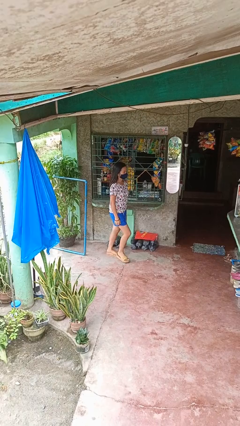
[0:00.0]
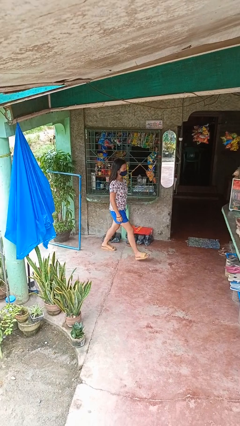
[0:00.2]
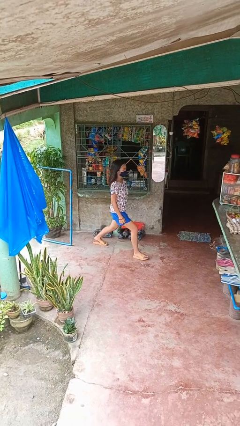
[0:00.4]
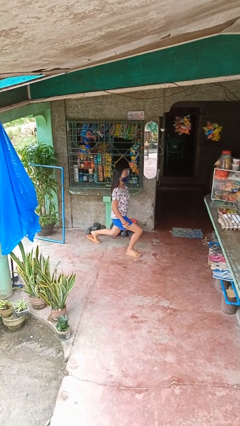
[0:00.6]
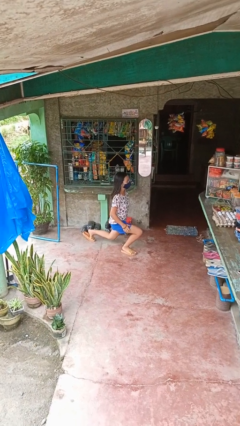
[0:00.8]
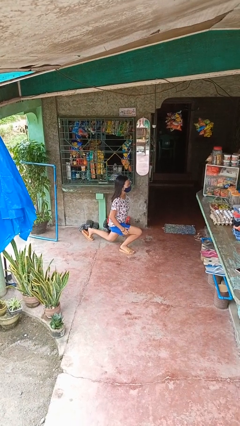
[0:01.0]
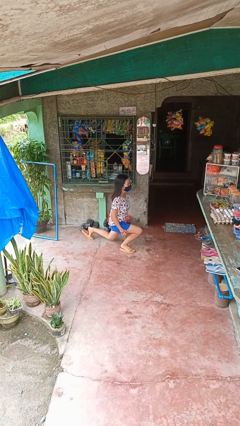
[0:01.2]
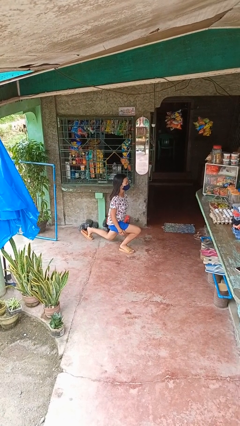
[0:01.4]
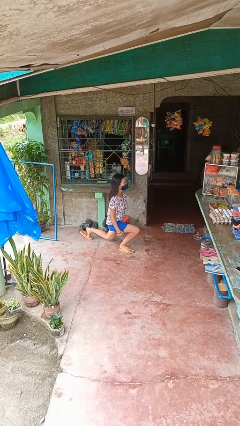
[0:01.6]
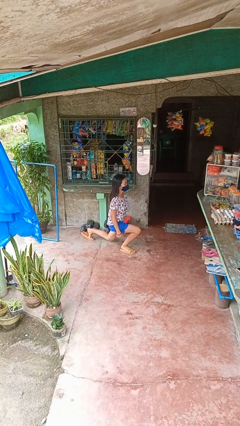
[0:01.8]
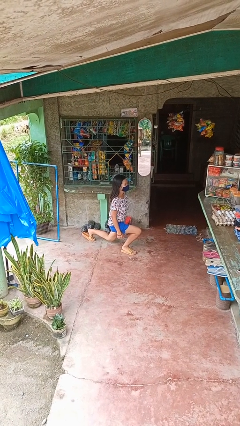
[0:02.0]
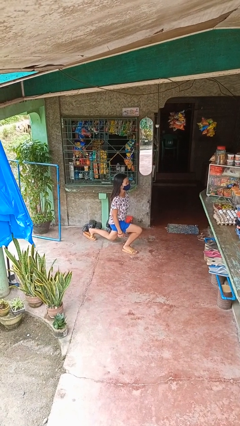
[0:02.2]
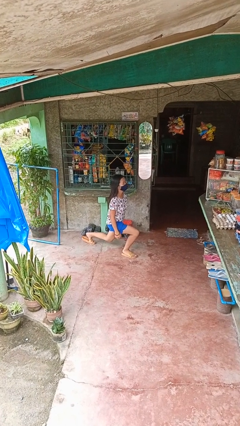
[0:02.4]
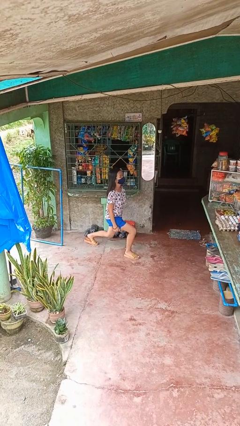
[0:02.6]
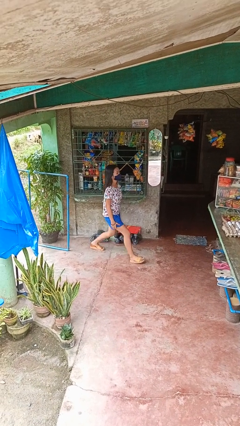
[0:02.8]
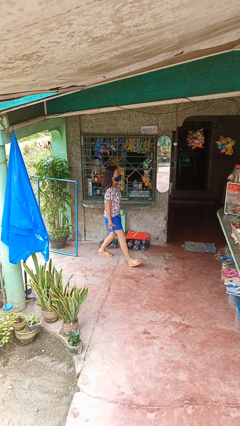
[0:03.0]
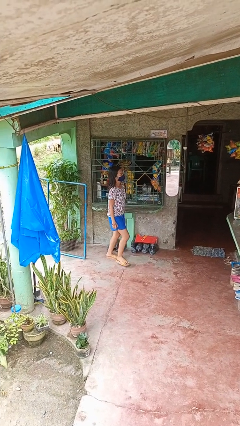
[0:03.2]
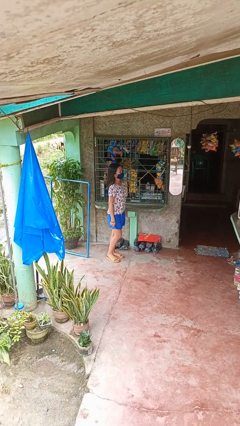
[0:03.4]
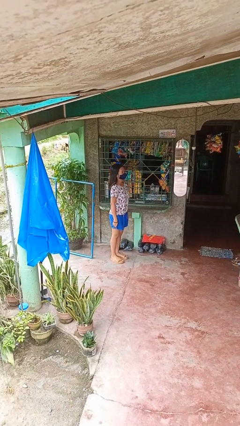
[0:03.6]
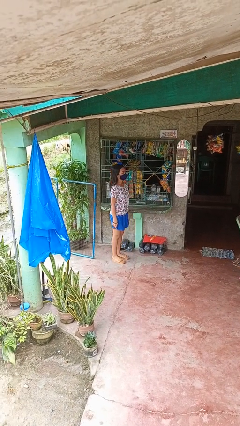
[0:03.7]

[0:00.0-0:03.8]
person exercises with lunges

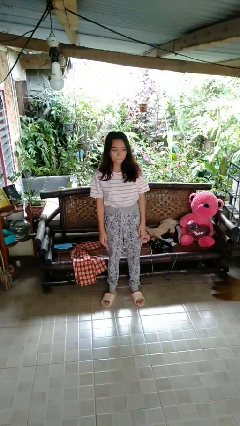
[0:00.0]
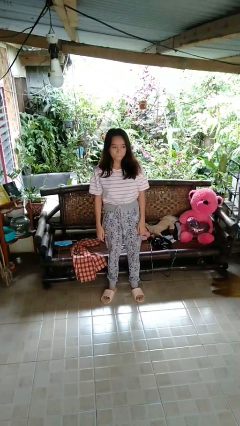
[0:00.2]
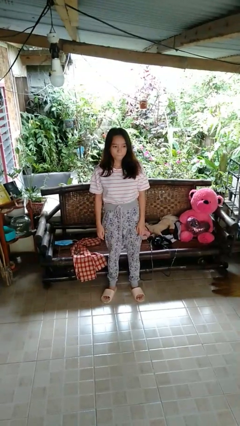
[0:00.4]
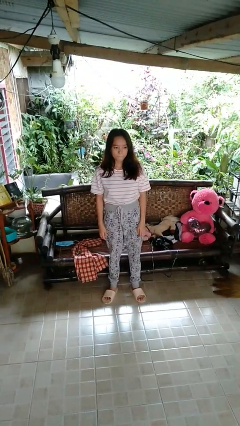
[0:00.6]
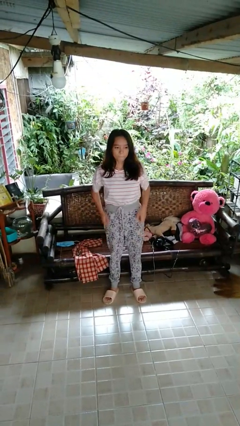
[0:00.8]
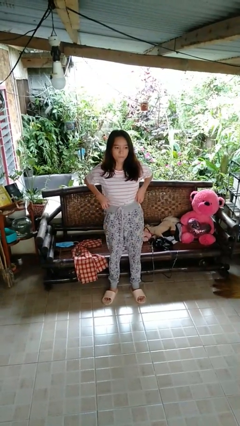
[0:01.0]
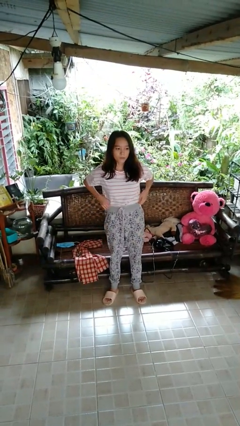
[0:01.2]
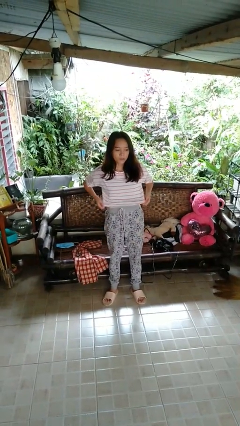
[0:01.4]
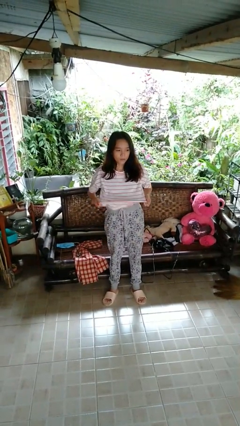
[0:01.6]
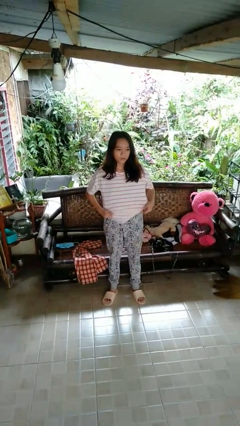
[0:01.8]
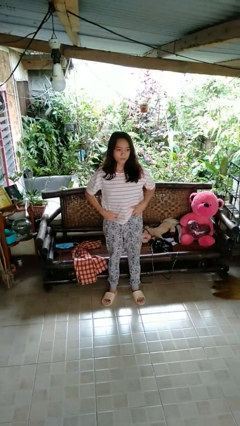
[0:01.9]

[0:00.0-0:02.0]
person untucks shirt

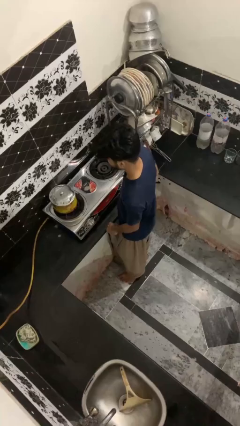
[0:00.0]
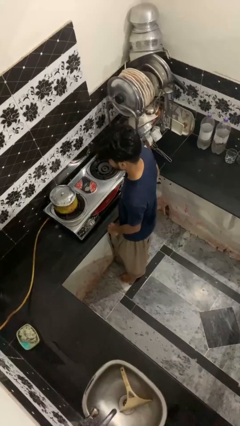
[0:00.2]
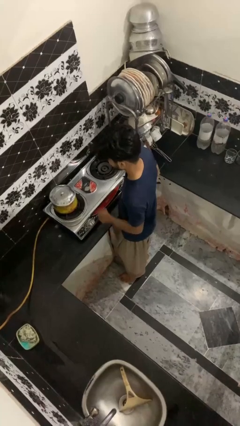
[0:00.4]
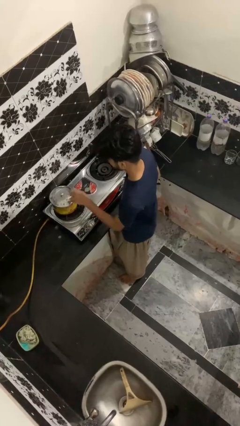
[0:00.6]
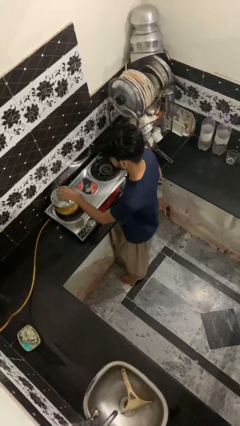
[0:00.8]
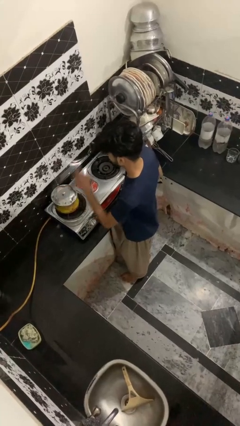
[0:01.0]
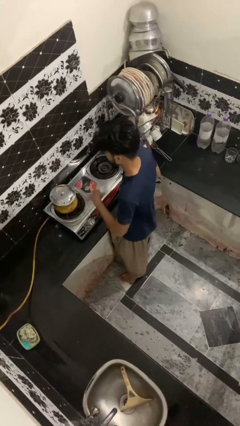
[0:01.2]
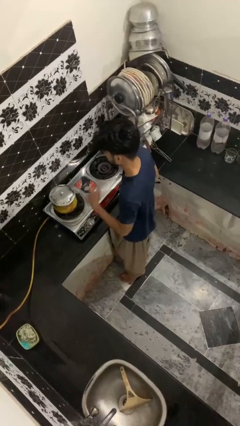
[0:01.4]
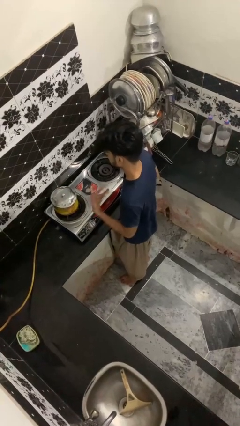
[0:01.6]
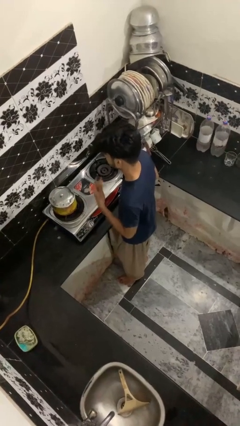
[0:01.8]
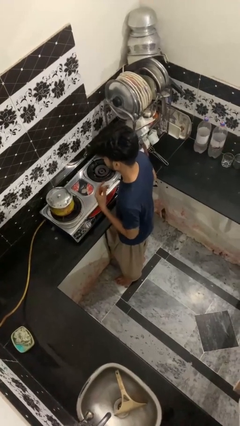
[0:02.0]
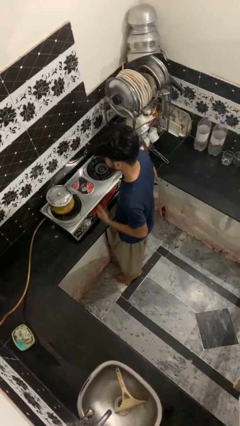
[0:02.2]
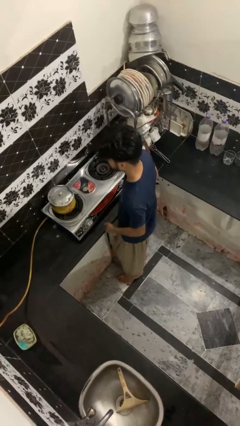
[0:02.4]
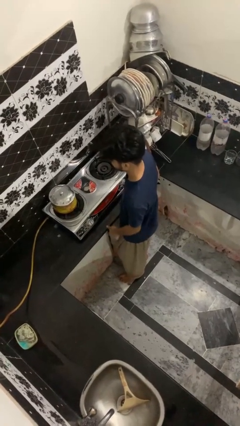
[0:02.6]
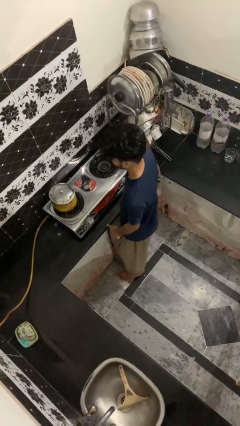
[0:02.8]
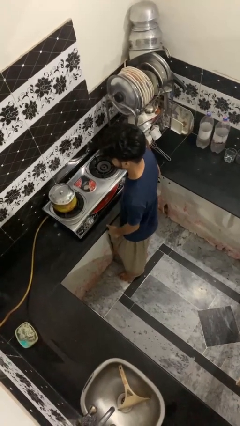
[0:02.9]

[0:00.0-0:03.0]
person burns hand

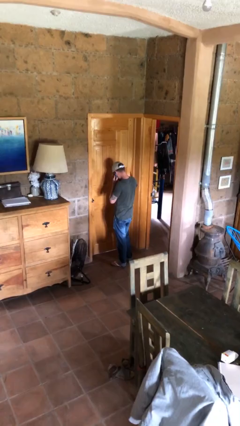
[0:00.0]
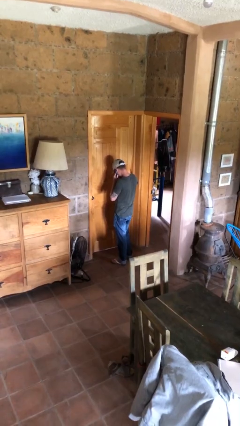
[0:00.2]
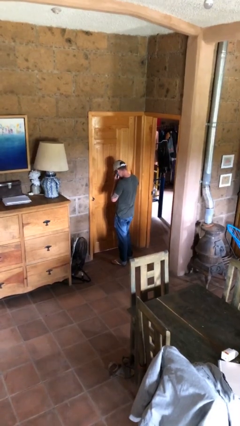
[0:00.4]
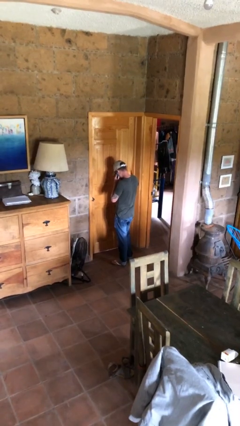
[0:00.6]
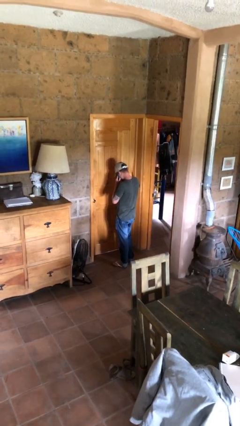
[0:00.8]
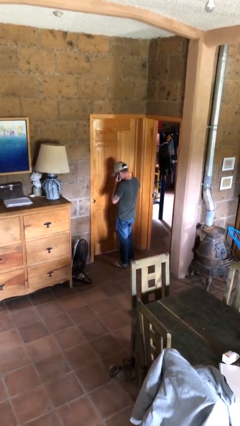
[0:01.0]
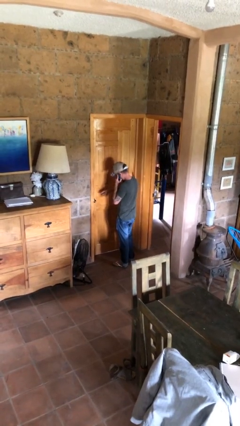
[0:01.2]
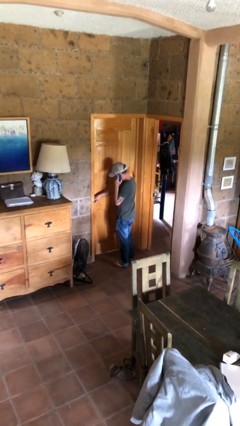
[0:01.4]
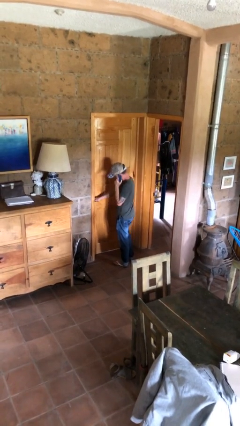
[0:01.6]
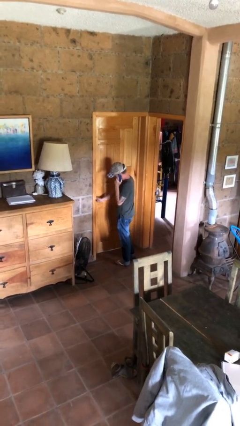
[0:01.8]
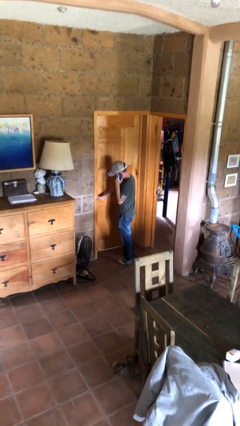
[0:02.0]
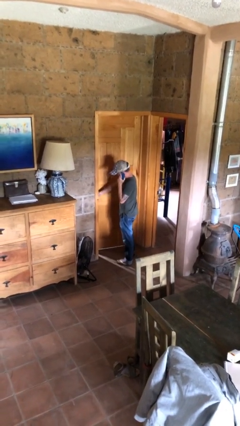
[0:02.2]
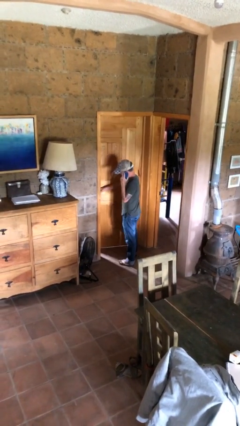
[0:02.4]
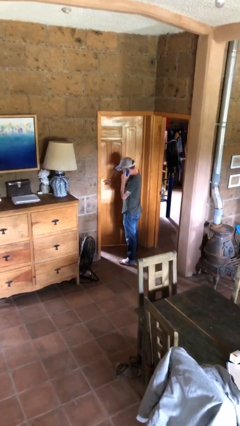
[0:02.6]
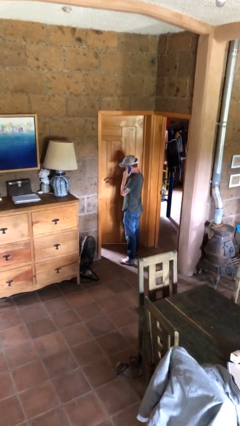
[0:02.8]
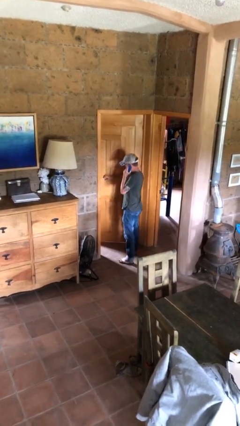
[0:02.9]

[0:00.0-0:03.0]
person opens facility door

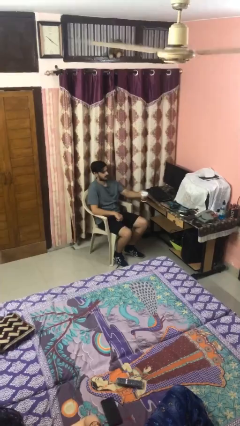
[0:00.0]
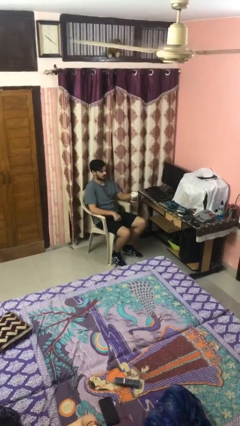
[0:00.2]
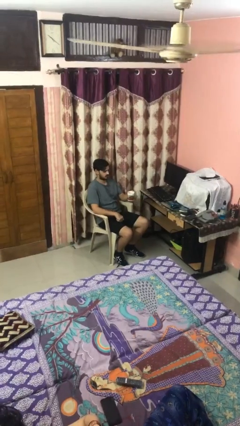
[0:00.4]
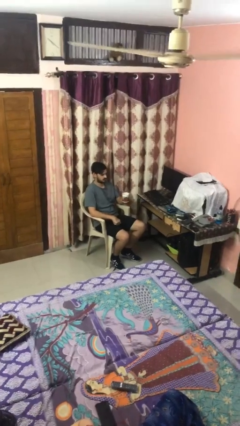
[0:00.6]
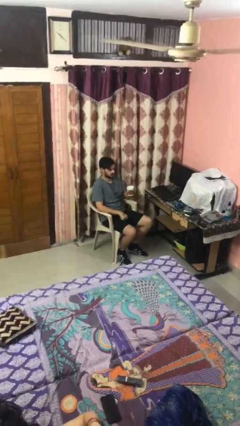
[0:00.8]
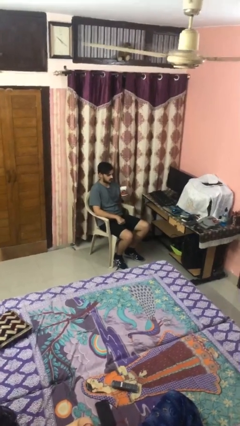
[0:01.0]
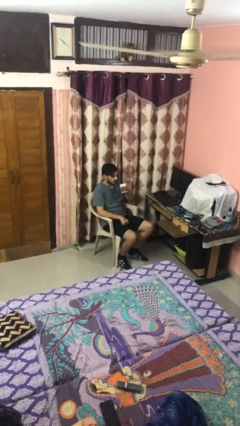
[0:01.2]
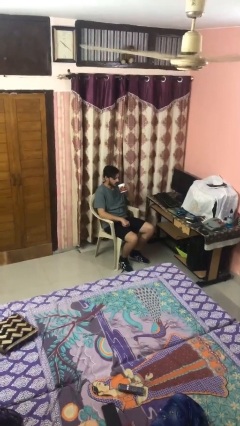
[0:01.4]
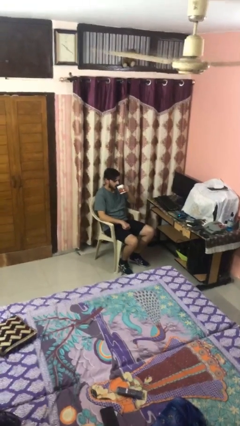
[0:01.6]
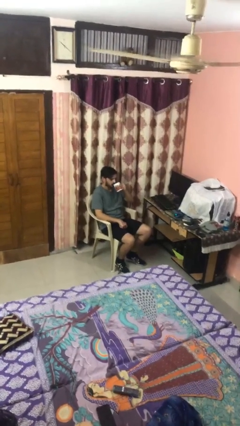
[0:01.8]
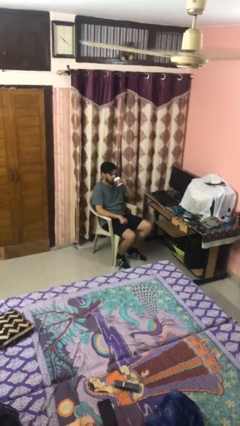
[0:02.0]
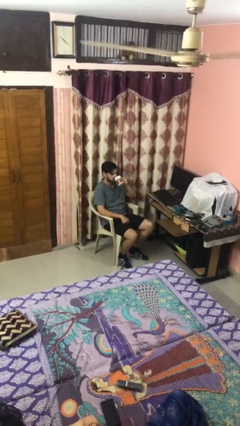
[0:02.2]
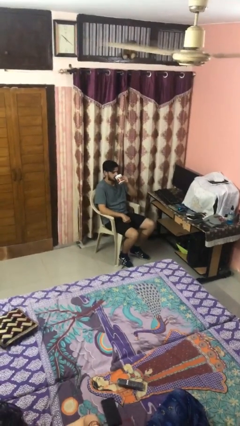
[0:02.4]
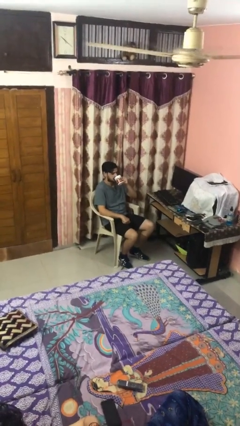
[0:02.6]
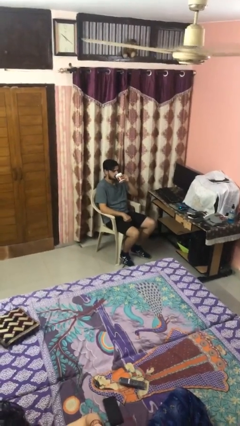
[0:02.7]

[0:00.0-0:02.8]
person drinks from mug

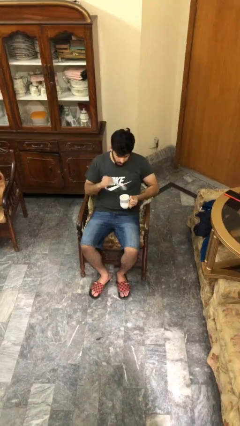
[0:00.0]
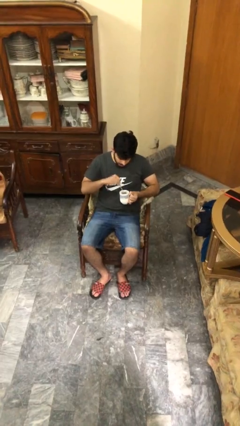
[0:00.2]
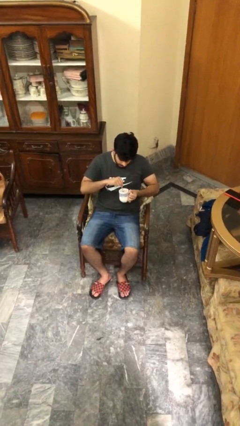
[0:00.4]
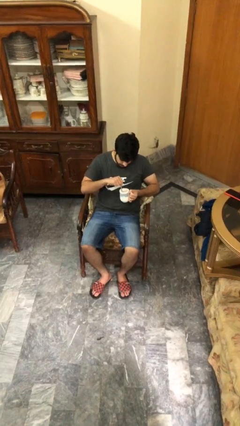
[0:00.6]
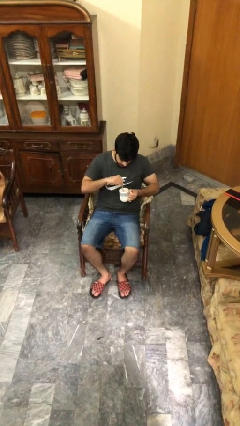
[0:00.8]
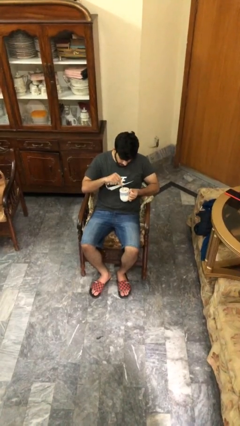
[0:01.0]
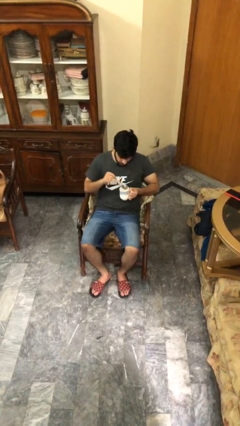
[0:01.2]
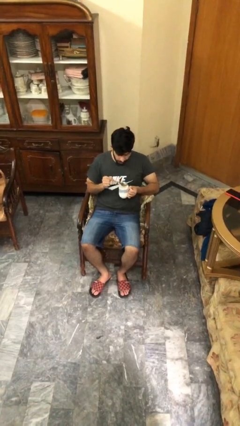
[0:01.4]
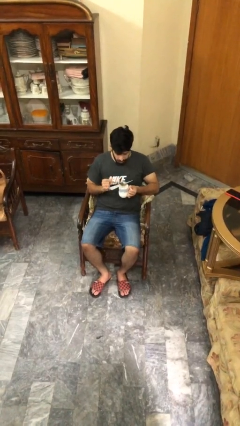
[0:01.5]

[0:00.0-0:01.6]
person stirs mug

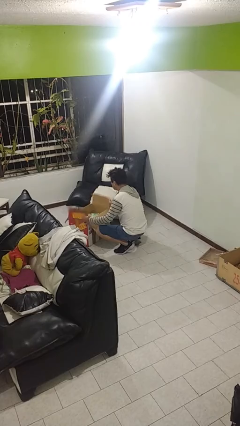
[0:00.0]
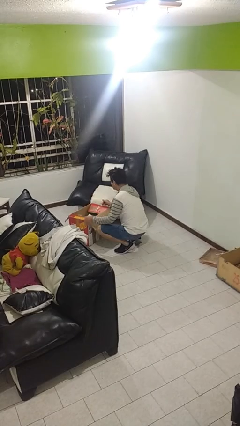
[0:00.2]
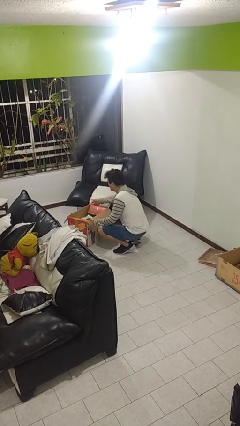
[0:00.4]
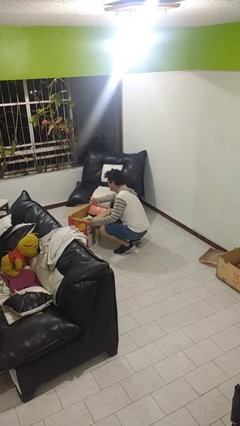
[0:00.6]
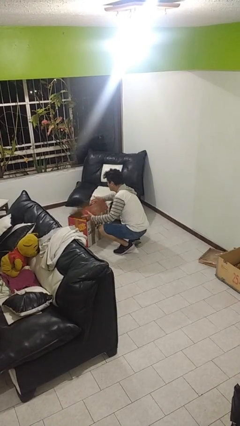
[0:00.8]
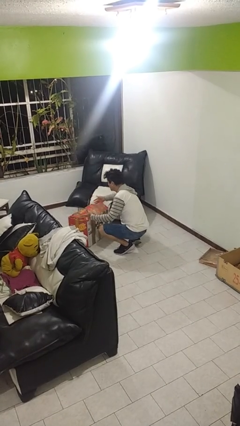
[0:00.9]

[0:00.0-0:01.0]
person closes box
